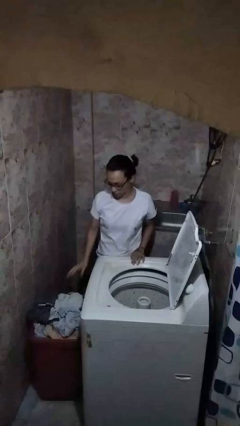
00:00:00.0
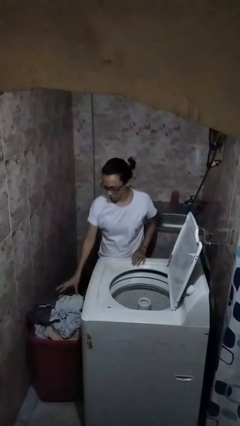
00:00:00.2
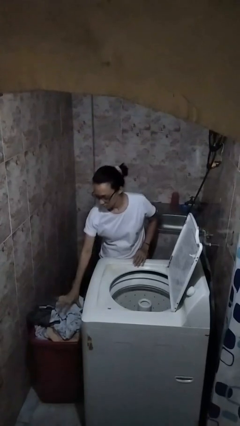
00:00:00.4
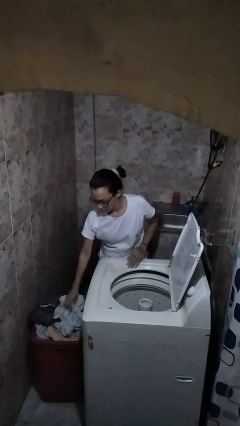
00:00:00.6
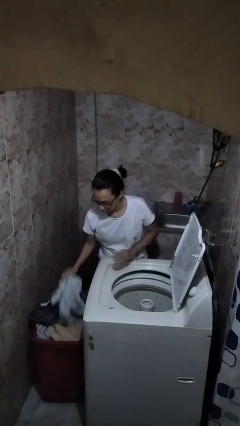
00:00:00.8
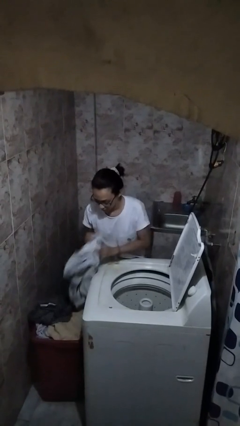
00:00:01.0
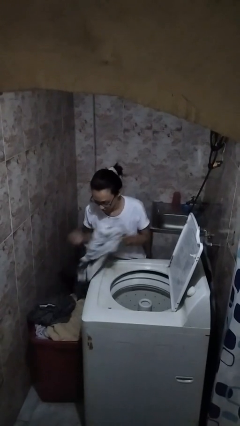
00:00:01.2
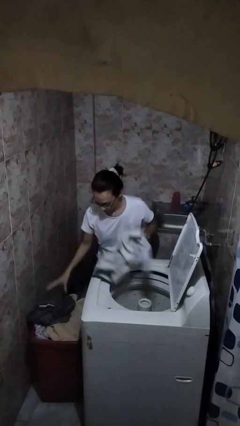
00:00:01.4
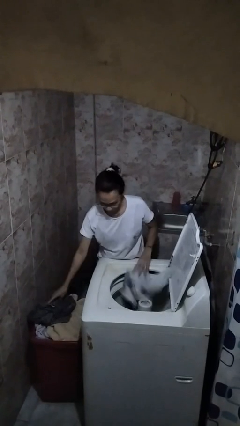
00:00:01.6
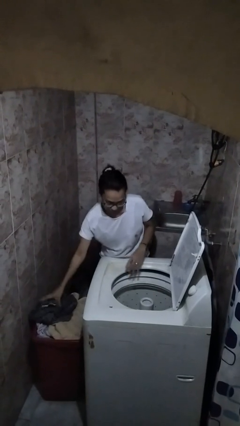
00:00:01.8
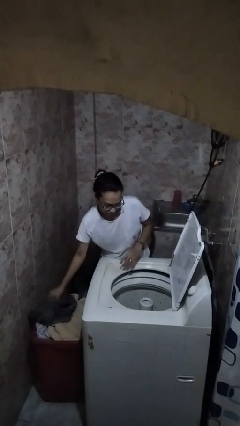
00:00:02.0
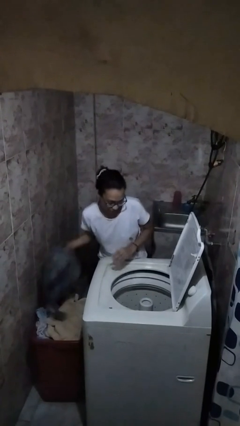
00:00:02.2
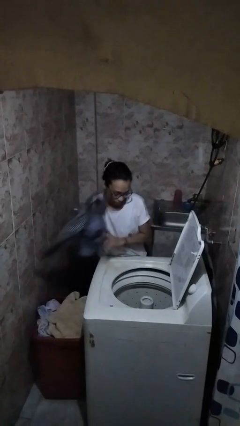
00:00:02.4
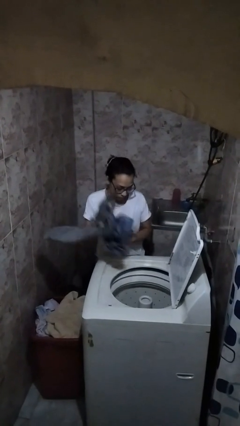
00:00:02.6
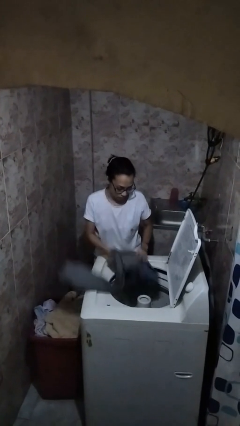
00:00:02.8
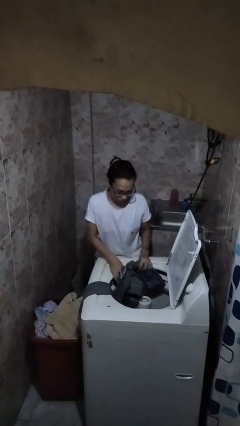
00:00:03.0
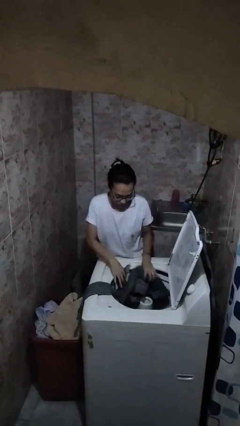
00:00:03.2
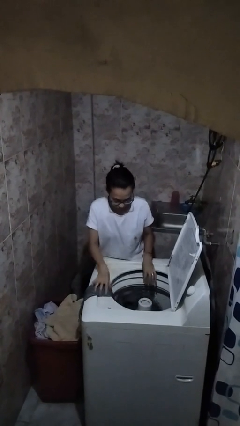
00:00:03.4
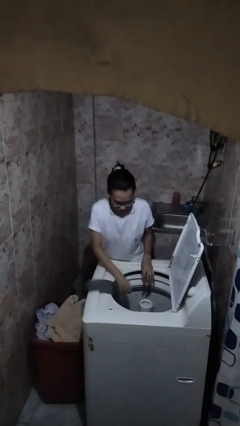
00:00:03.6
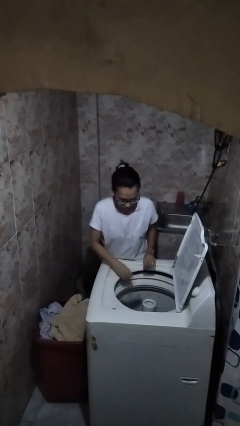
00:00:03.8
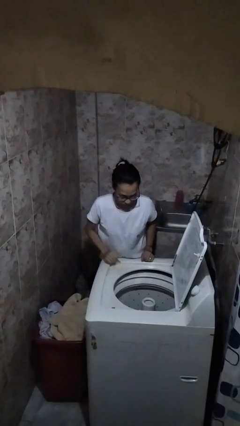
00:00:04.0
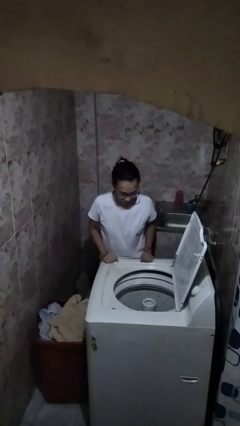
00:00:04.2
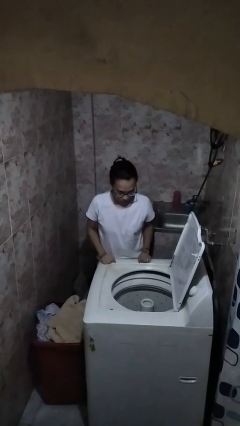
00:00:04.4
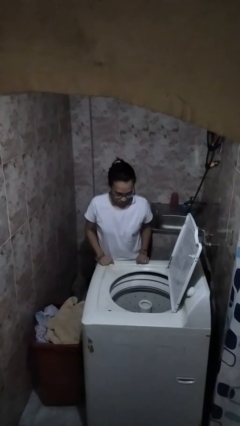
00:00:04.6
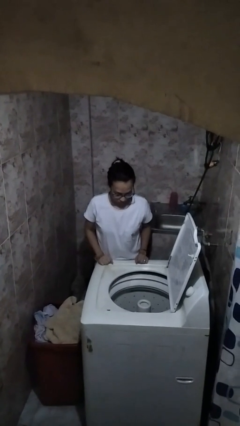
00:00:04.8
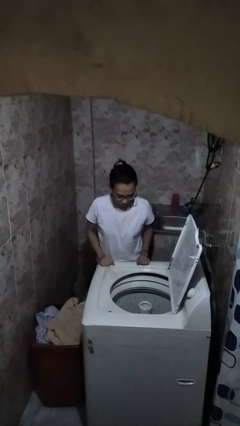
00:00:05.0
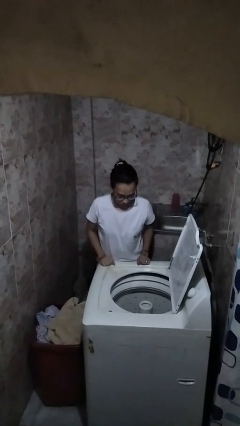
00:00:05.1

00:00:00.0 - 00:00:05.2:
person unloads clotheswasher

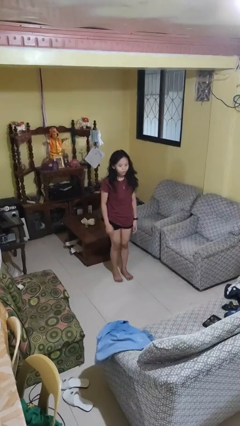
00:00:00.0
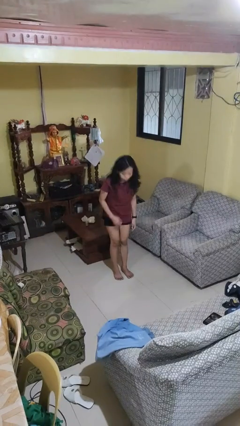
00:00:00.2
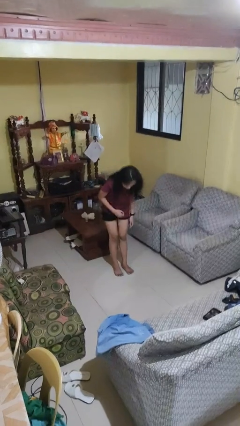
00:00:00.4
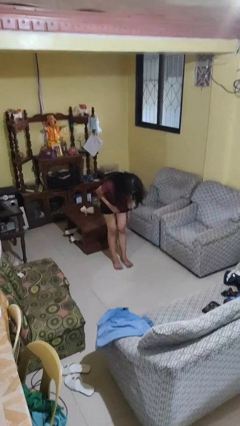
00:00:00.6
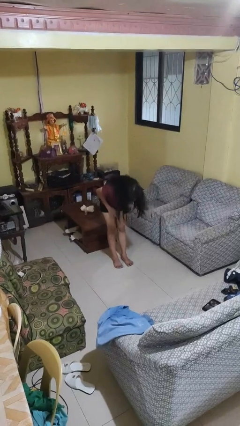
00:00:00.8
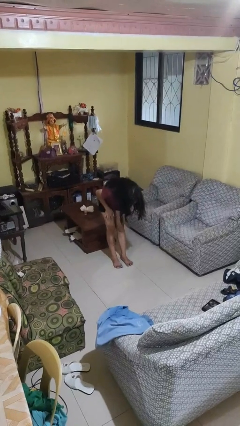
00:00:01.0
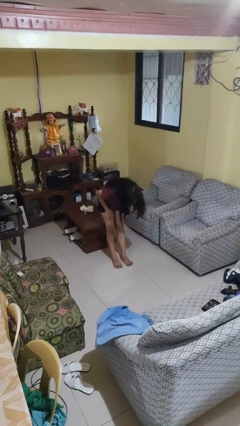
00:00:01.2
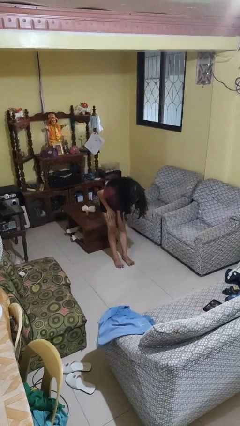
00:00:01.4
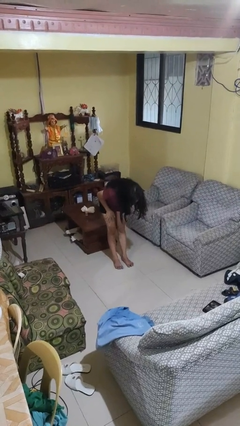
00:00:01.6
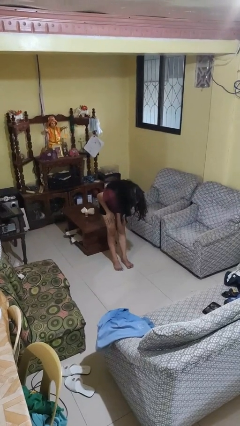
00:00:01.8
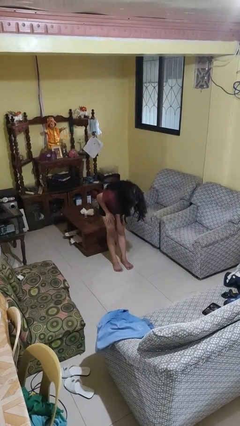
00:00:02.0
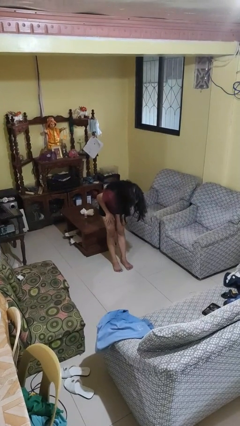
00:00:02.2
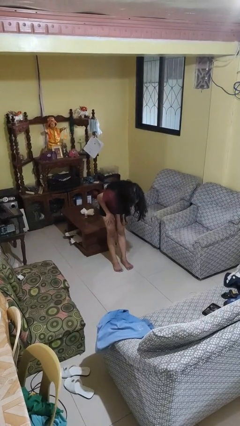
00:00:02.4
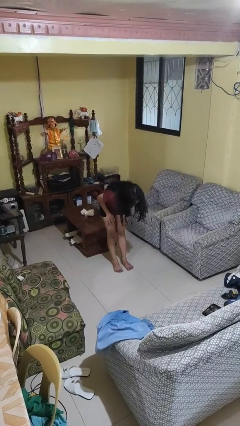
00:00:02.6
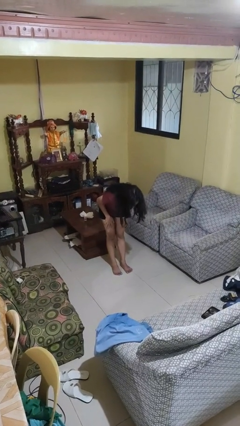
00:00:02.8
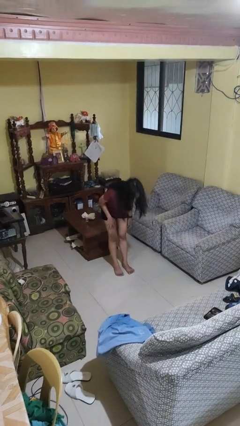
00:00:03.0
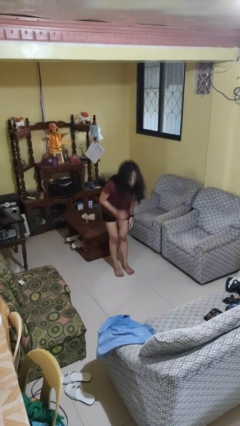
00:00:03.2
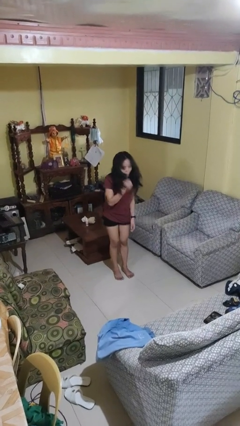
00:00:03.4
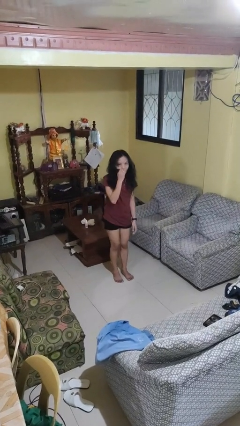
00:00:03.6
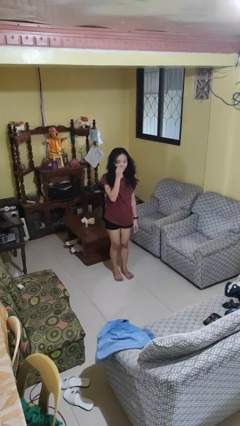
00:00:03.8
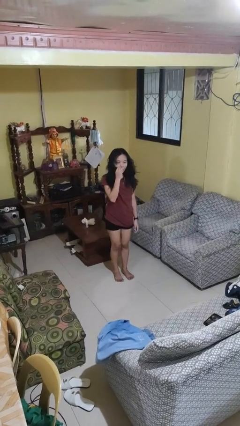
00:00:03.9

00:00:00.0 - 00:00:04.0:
person bows

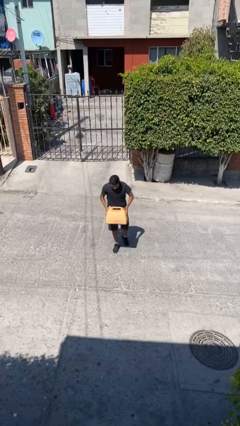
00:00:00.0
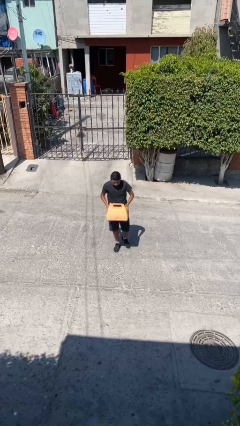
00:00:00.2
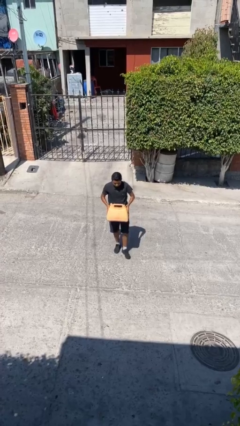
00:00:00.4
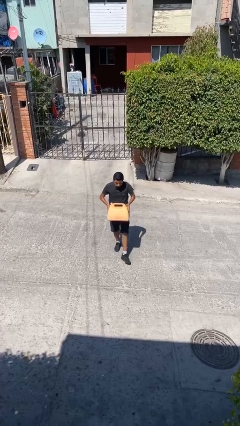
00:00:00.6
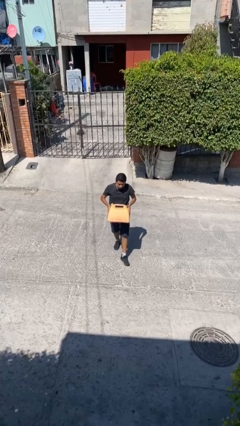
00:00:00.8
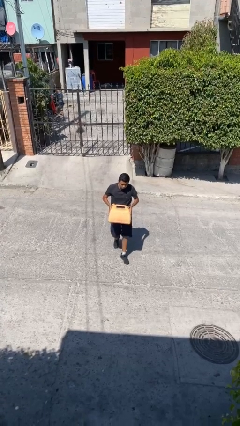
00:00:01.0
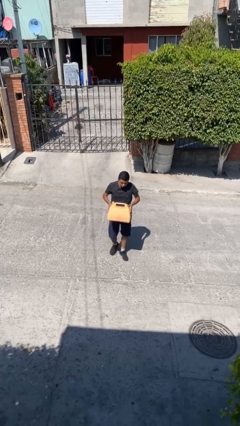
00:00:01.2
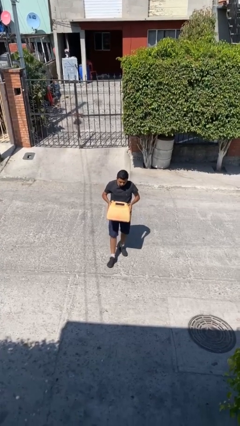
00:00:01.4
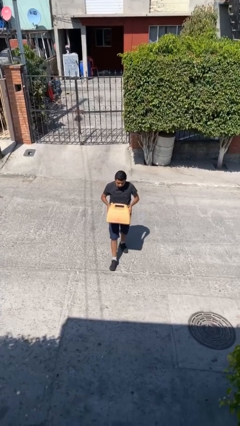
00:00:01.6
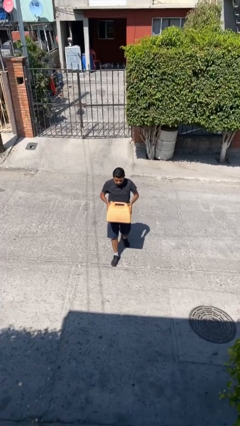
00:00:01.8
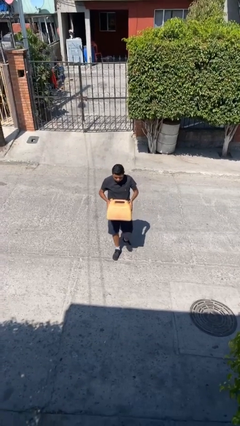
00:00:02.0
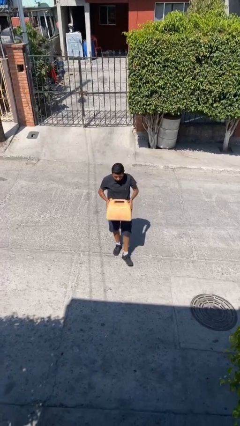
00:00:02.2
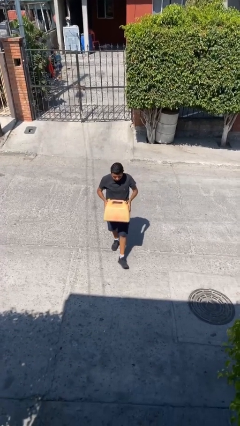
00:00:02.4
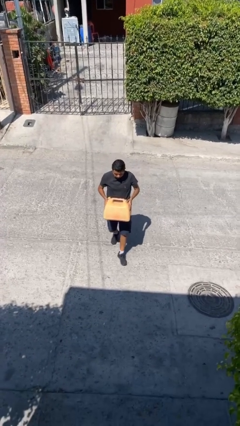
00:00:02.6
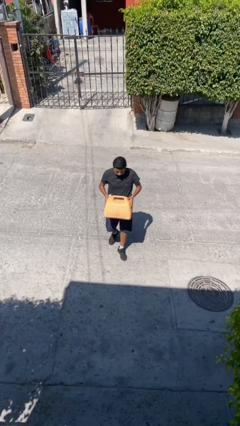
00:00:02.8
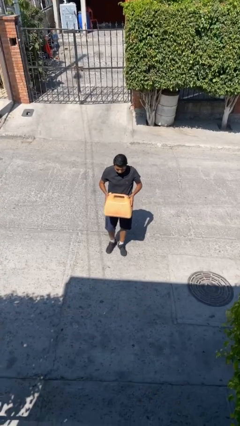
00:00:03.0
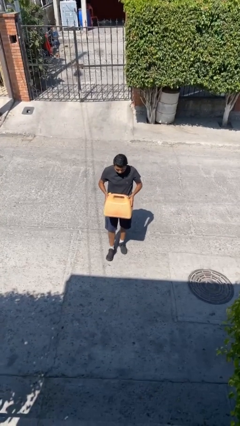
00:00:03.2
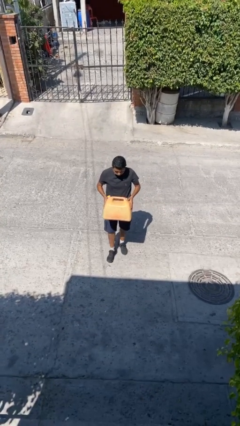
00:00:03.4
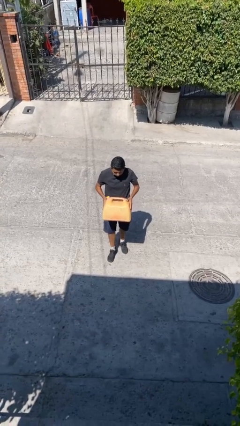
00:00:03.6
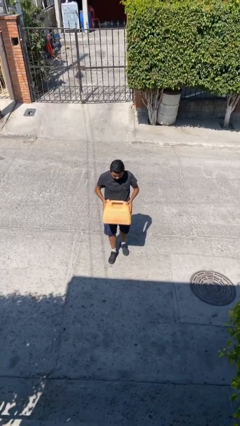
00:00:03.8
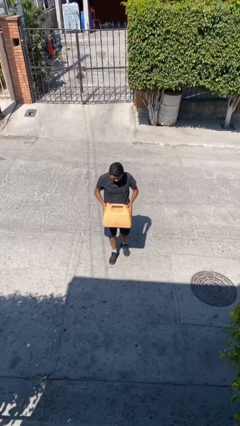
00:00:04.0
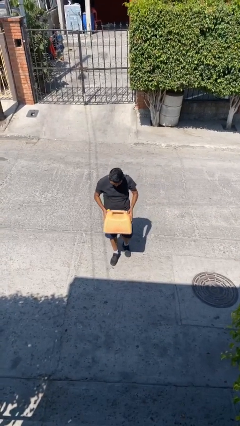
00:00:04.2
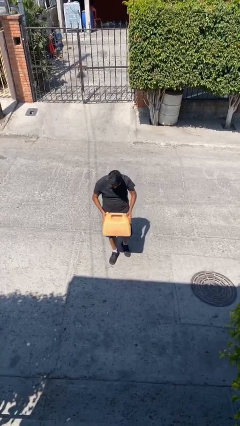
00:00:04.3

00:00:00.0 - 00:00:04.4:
person carries heavy object

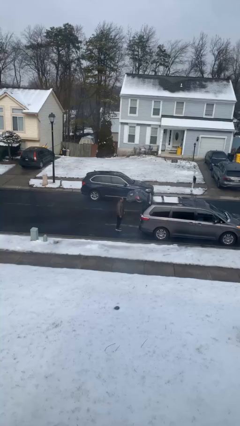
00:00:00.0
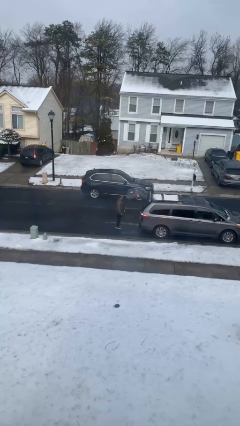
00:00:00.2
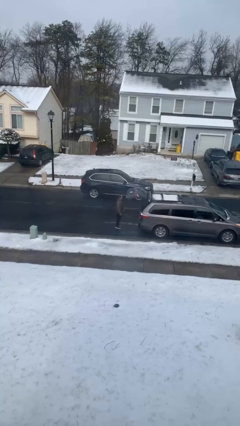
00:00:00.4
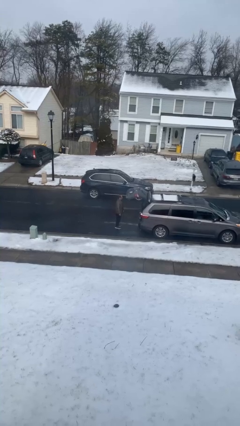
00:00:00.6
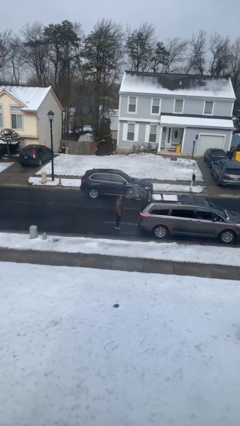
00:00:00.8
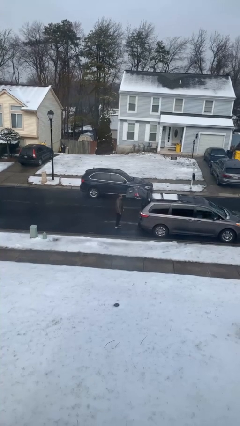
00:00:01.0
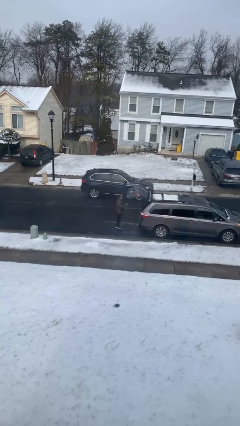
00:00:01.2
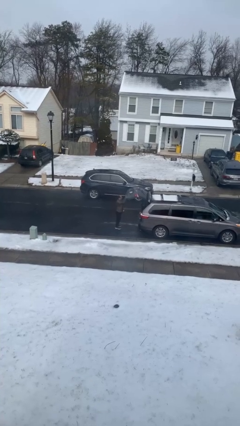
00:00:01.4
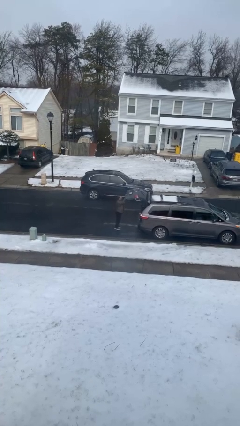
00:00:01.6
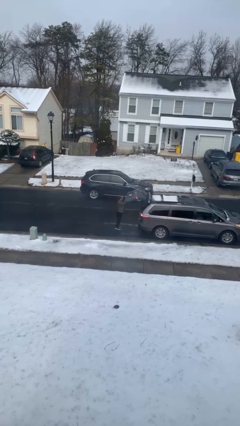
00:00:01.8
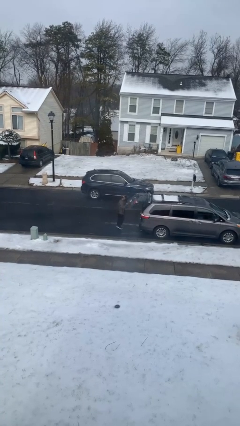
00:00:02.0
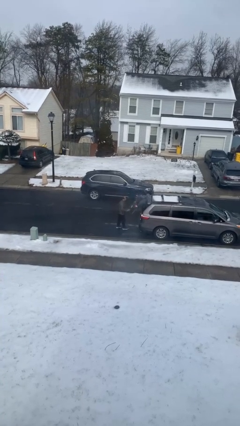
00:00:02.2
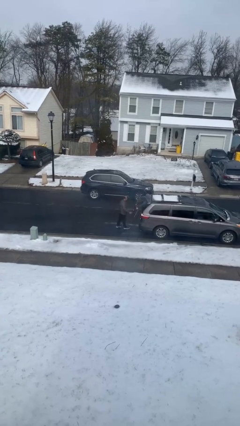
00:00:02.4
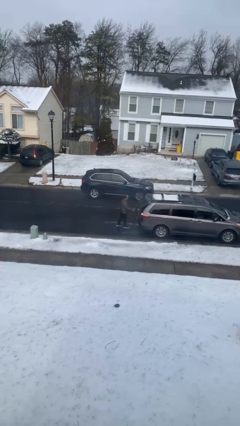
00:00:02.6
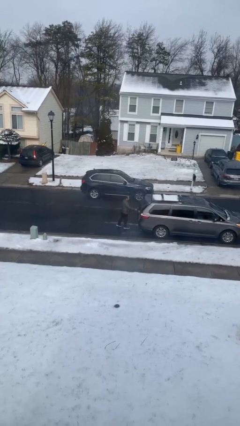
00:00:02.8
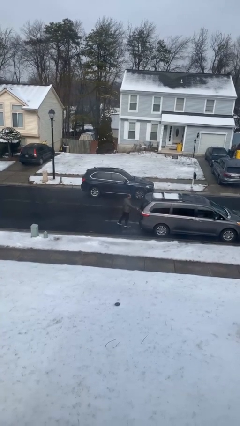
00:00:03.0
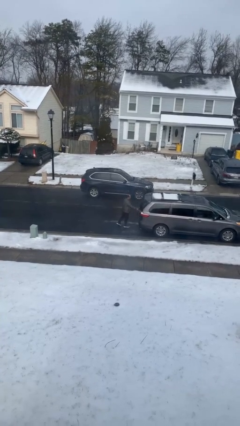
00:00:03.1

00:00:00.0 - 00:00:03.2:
person closes car trunk

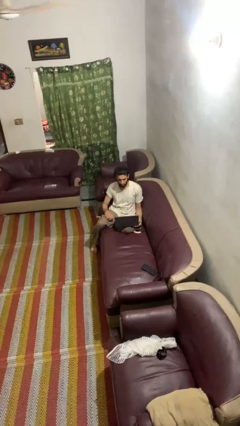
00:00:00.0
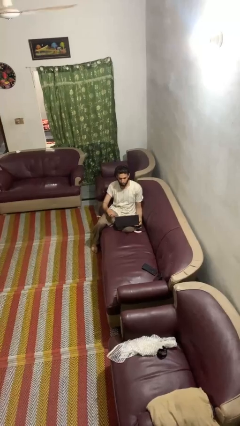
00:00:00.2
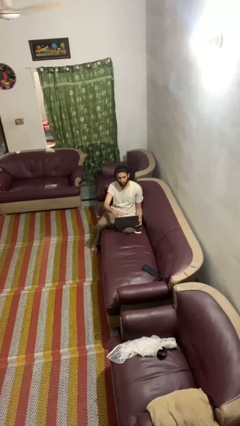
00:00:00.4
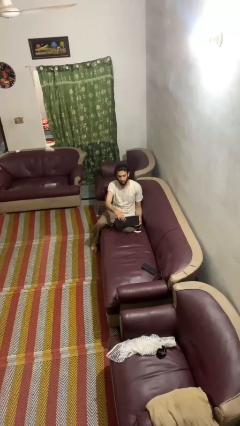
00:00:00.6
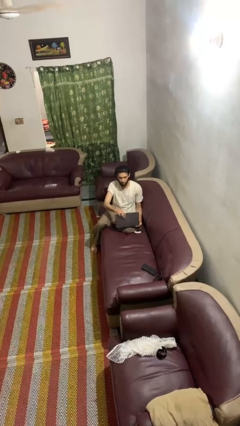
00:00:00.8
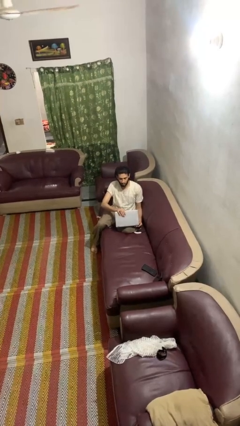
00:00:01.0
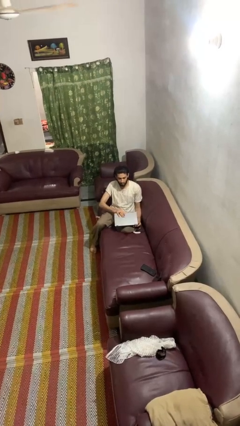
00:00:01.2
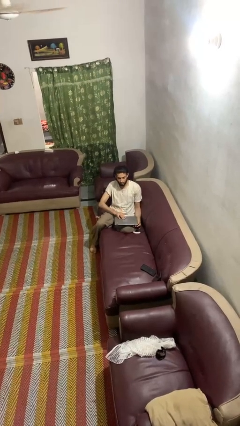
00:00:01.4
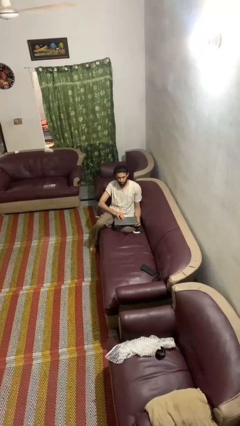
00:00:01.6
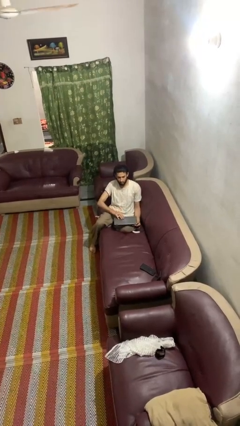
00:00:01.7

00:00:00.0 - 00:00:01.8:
person closes laptop
